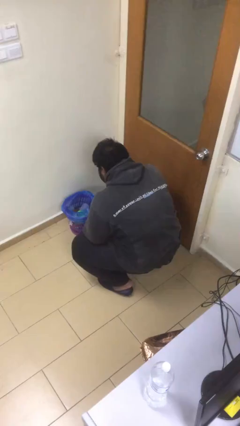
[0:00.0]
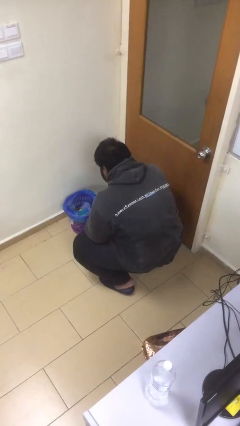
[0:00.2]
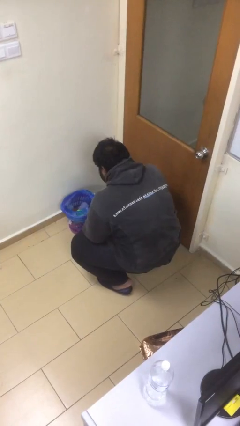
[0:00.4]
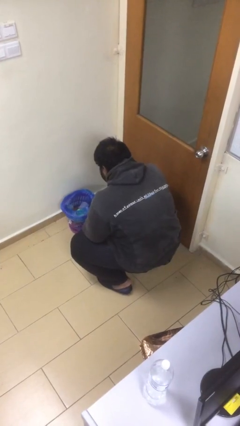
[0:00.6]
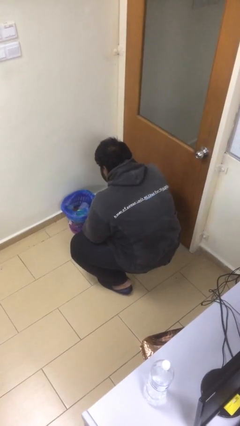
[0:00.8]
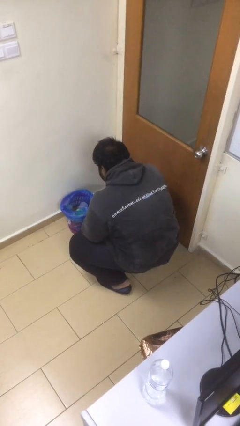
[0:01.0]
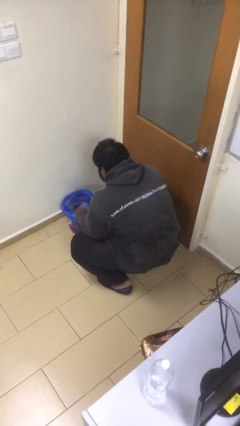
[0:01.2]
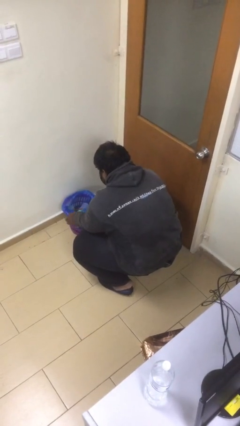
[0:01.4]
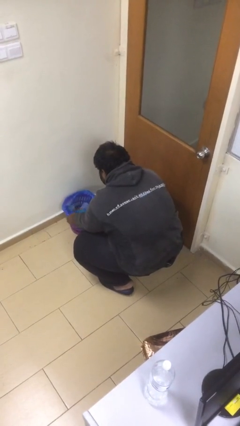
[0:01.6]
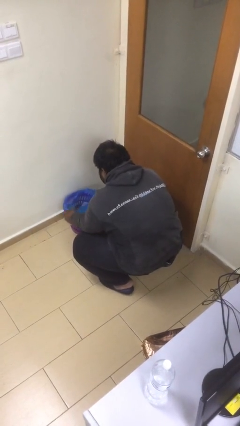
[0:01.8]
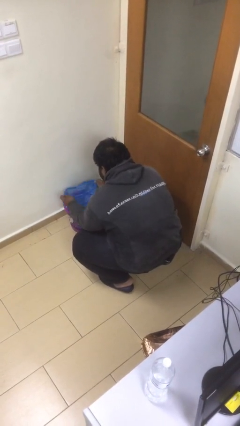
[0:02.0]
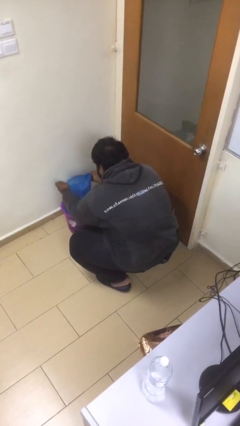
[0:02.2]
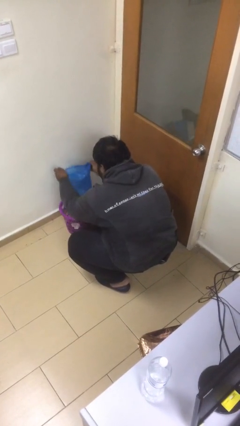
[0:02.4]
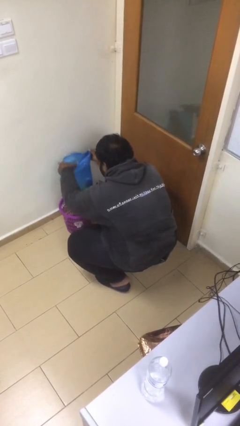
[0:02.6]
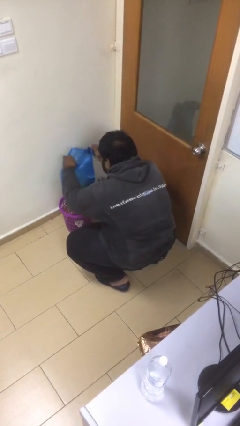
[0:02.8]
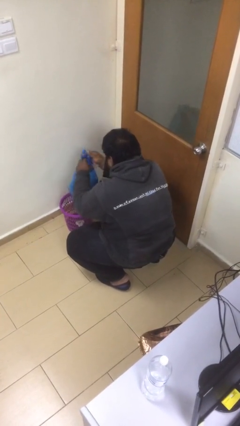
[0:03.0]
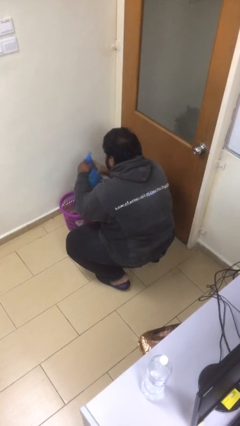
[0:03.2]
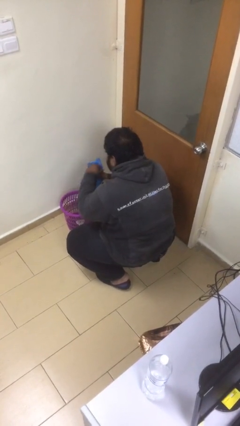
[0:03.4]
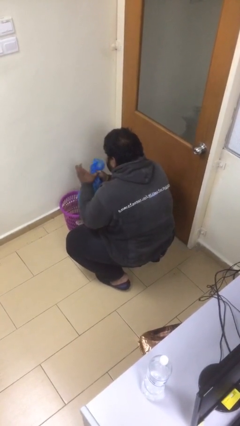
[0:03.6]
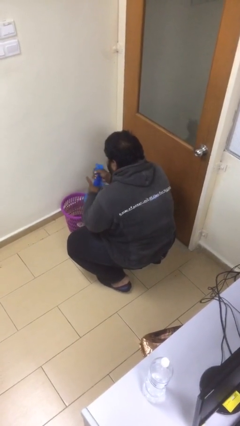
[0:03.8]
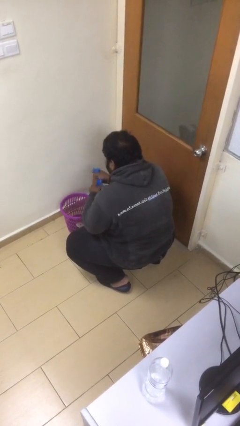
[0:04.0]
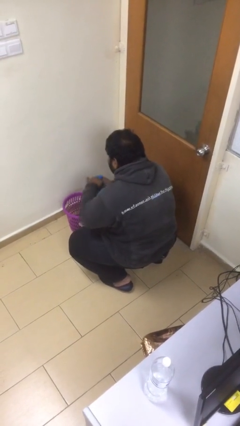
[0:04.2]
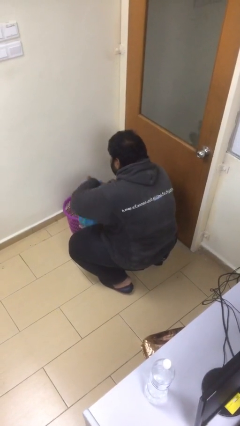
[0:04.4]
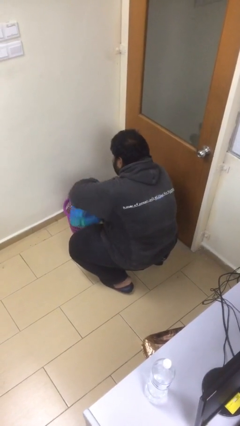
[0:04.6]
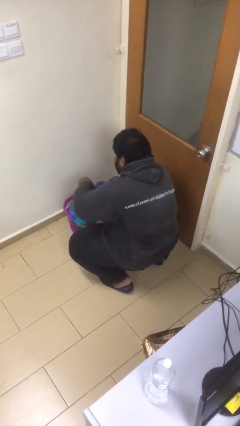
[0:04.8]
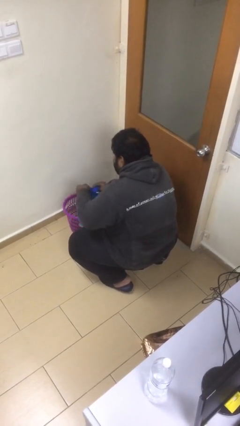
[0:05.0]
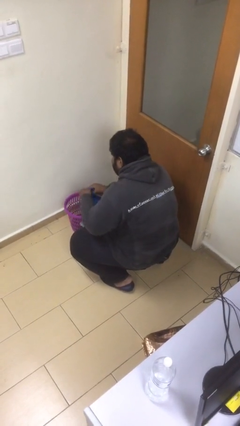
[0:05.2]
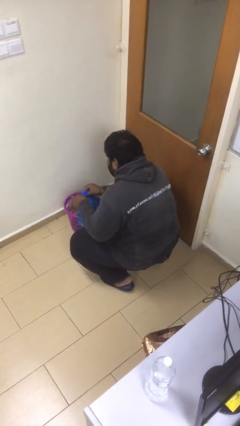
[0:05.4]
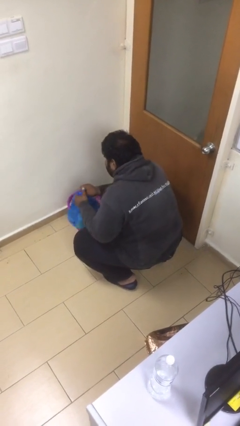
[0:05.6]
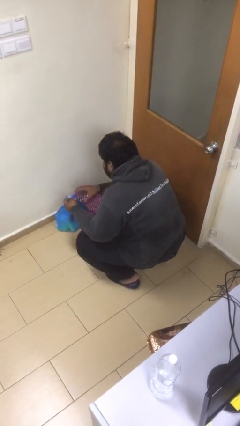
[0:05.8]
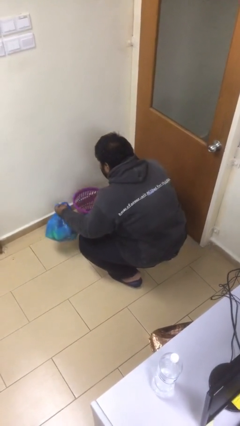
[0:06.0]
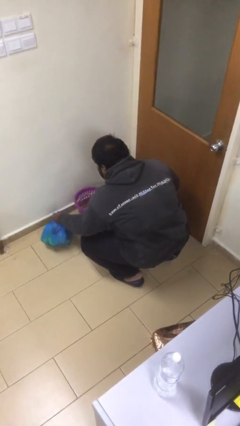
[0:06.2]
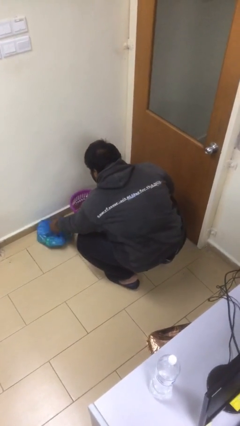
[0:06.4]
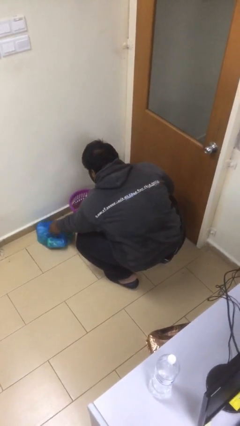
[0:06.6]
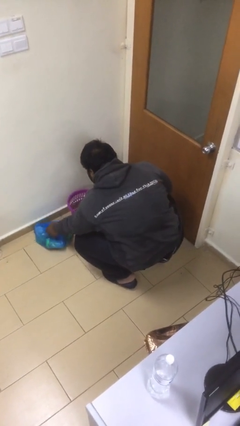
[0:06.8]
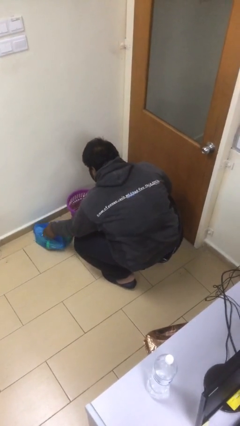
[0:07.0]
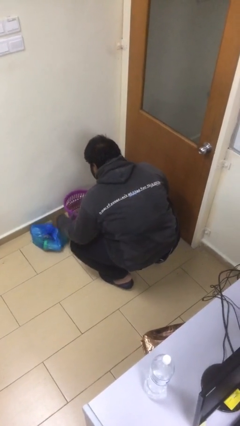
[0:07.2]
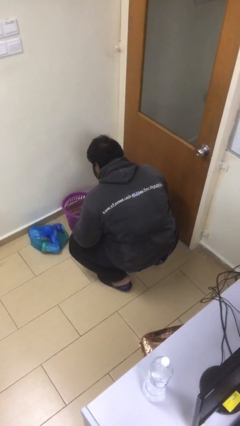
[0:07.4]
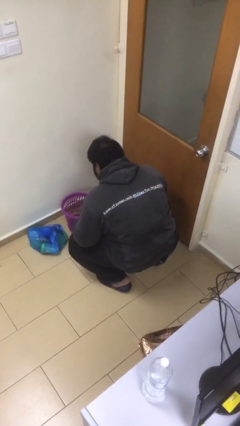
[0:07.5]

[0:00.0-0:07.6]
person removes trashbag from trashcan

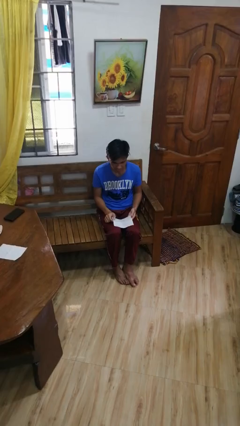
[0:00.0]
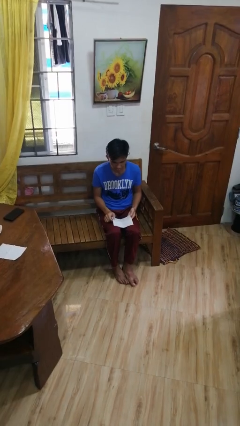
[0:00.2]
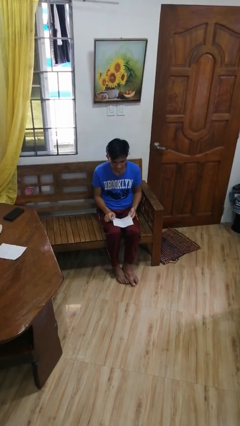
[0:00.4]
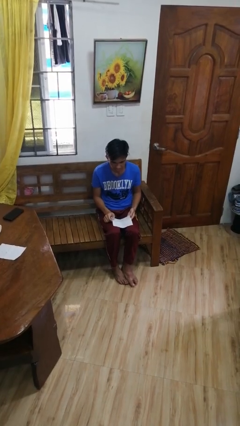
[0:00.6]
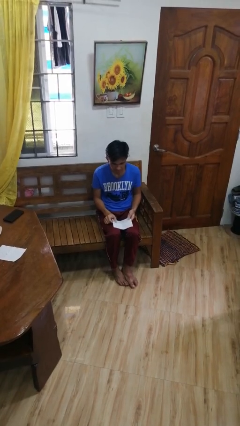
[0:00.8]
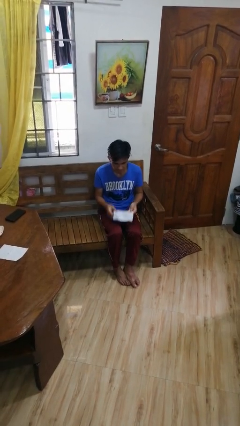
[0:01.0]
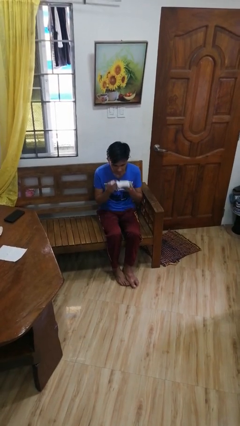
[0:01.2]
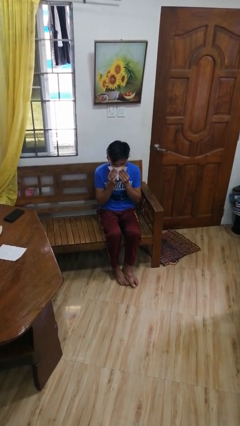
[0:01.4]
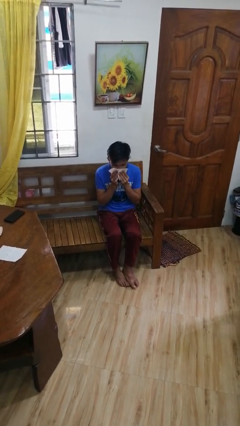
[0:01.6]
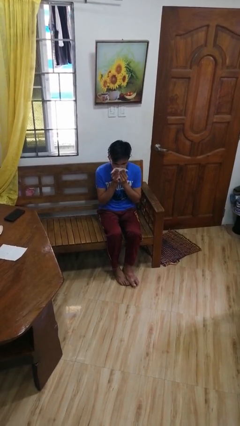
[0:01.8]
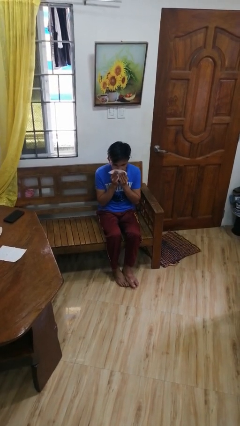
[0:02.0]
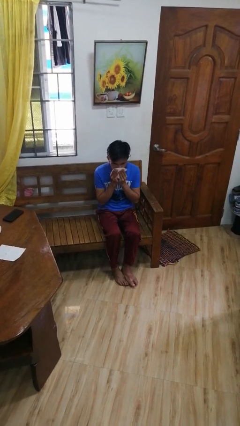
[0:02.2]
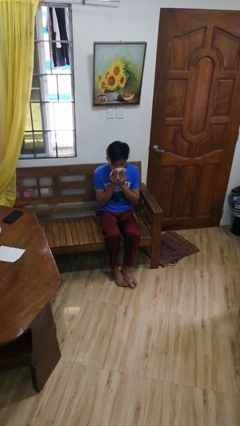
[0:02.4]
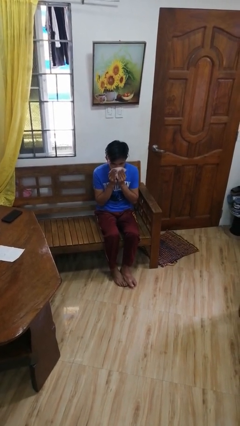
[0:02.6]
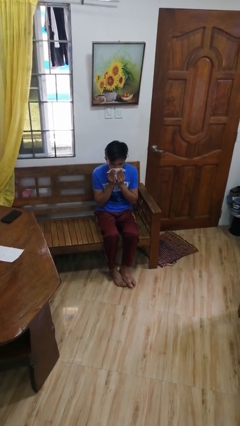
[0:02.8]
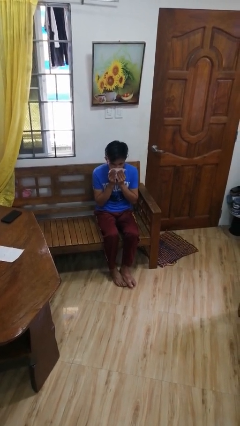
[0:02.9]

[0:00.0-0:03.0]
person wipes mouth with napkin

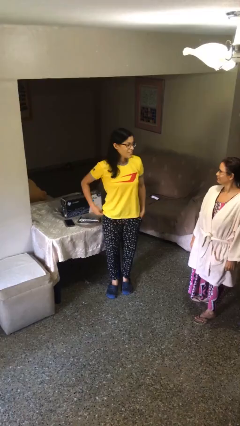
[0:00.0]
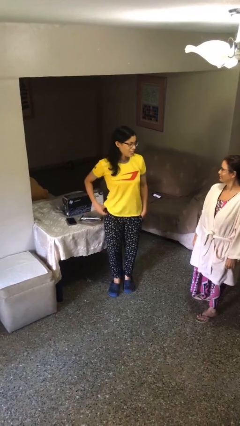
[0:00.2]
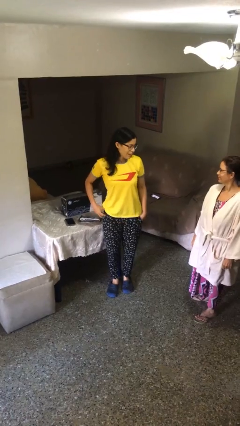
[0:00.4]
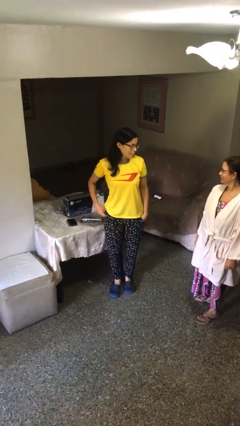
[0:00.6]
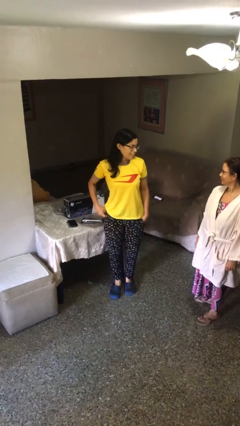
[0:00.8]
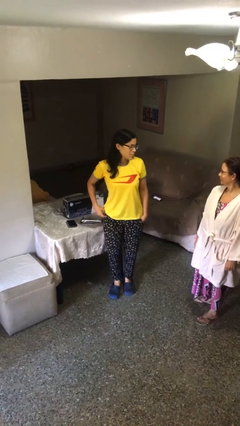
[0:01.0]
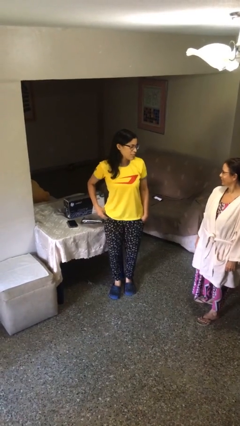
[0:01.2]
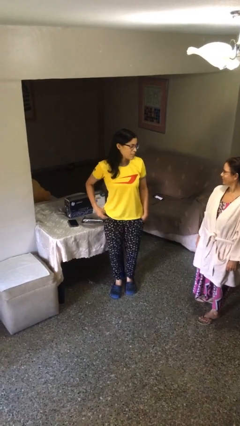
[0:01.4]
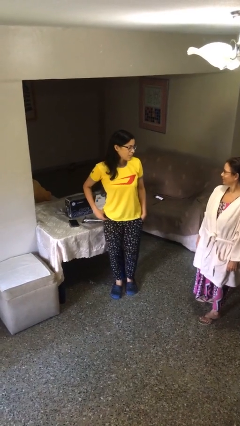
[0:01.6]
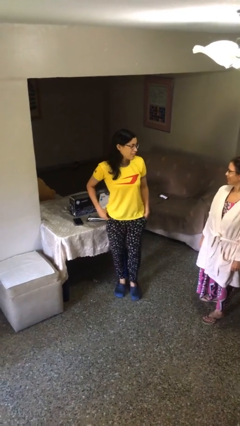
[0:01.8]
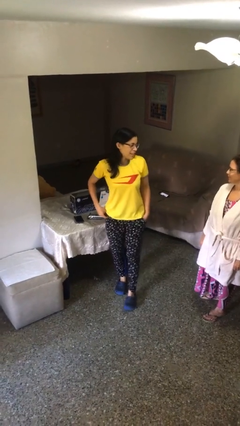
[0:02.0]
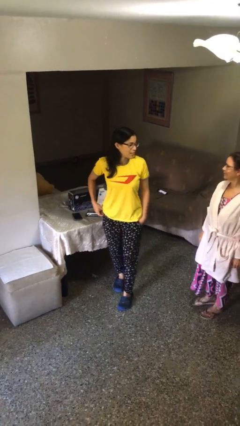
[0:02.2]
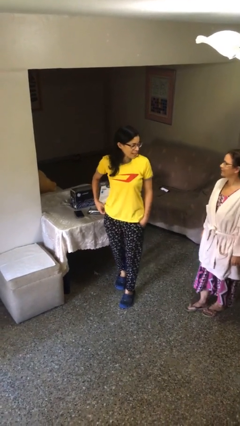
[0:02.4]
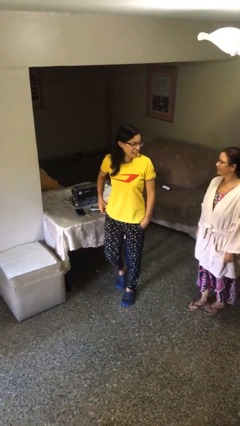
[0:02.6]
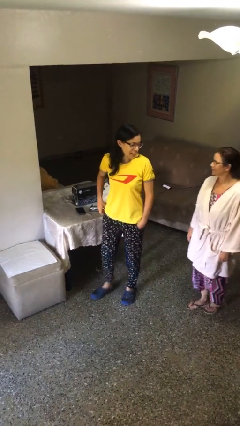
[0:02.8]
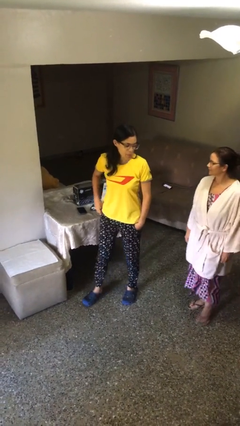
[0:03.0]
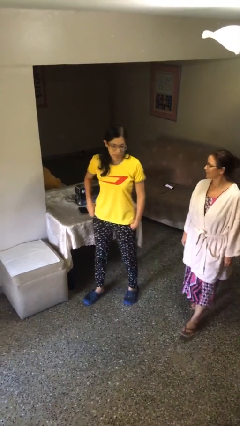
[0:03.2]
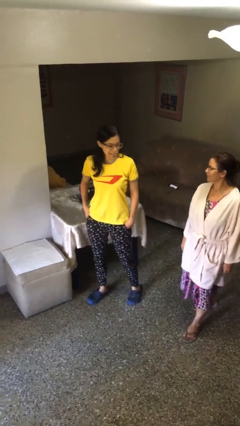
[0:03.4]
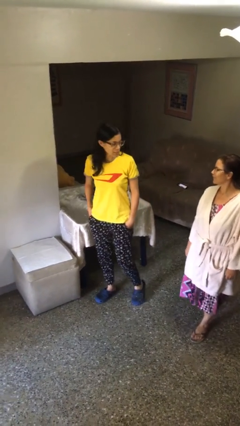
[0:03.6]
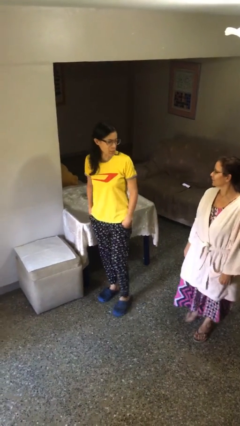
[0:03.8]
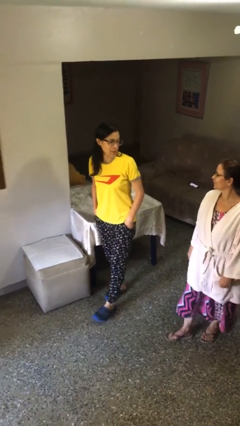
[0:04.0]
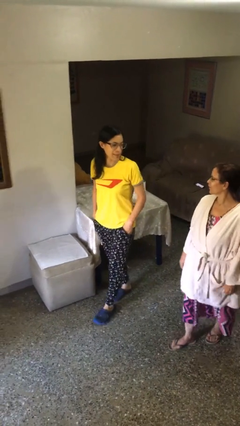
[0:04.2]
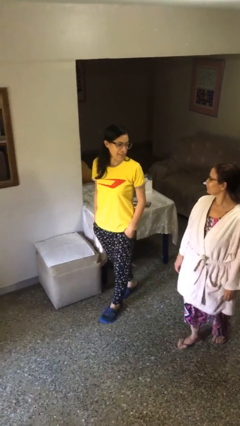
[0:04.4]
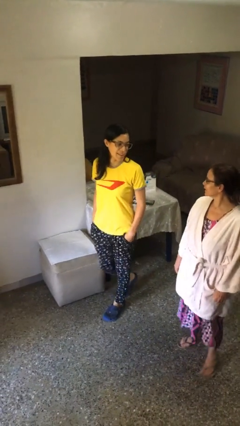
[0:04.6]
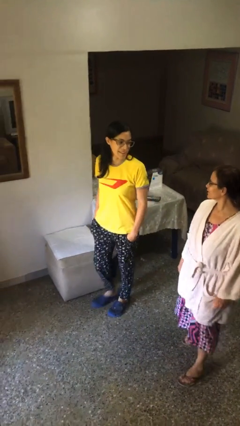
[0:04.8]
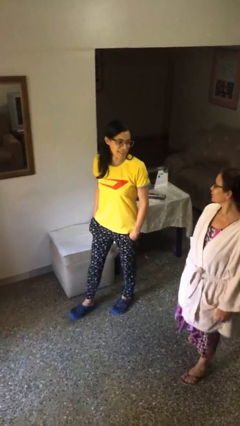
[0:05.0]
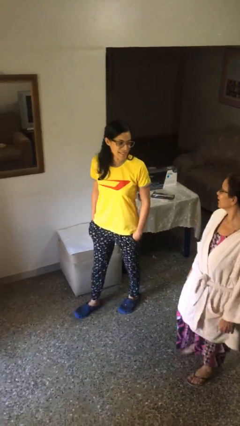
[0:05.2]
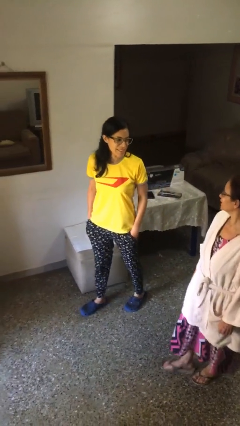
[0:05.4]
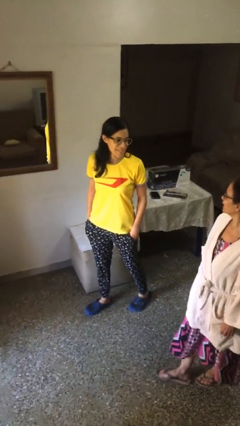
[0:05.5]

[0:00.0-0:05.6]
person talks to person

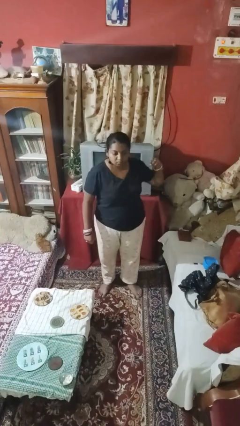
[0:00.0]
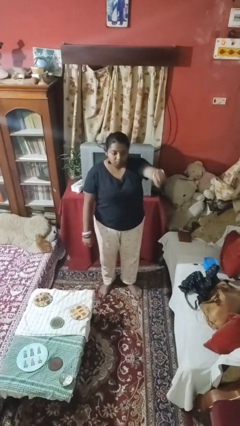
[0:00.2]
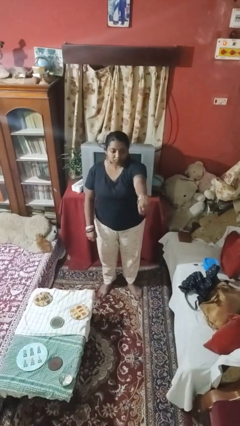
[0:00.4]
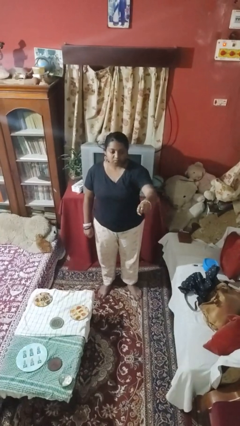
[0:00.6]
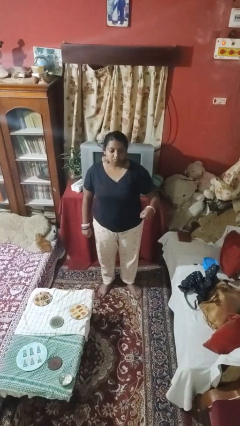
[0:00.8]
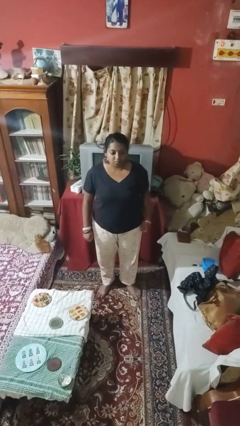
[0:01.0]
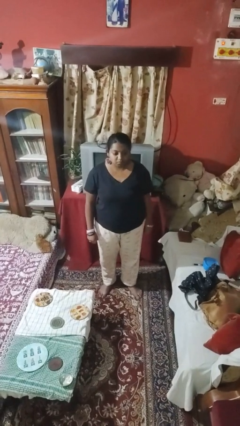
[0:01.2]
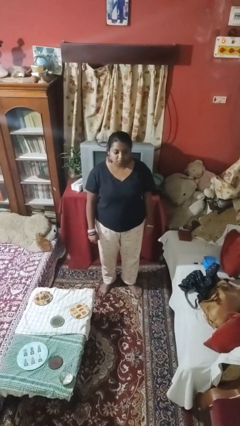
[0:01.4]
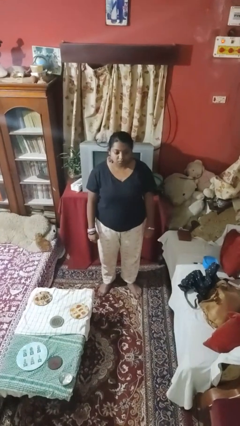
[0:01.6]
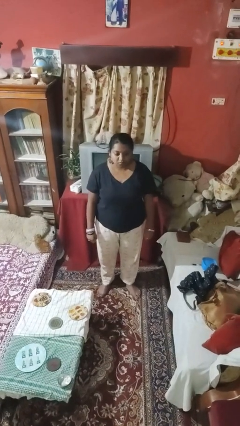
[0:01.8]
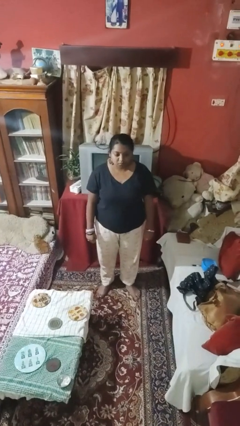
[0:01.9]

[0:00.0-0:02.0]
person punches
